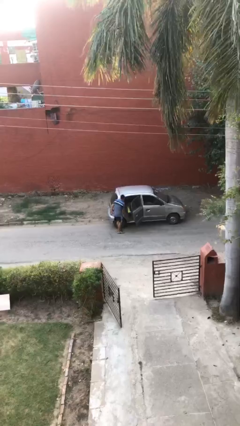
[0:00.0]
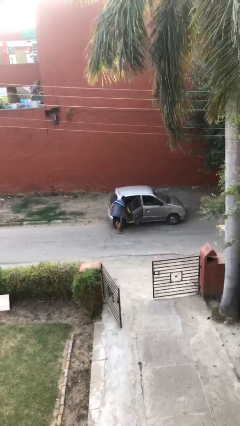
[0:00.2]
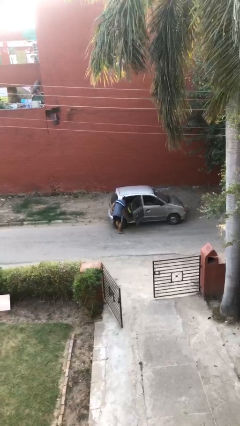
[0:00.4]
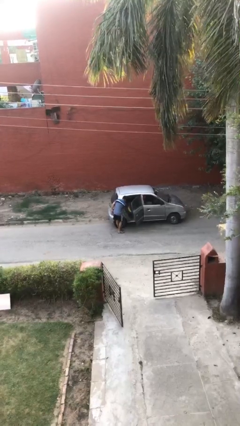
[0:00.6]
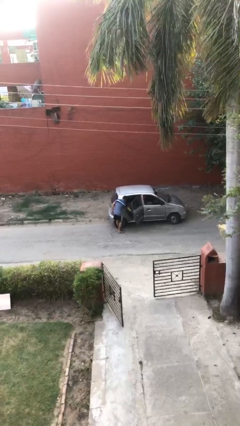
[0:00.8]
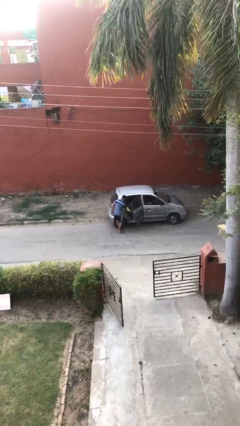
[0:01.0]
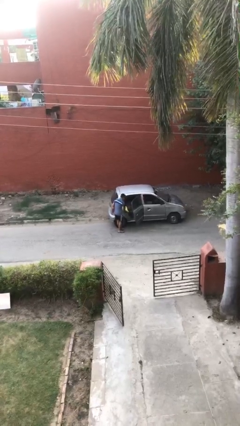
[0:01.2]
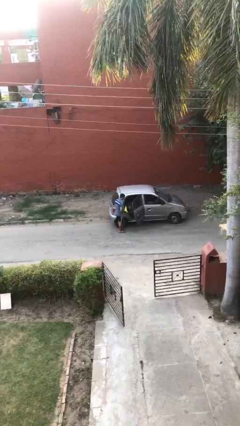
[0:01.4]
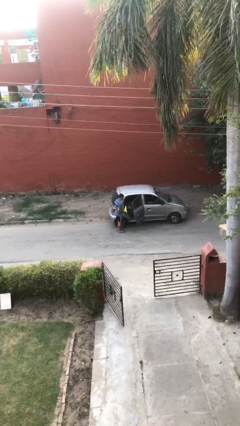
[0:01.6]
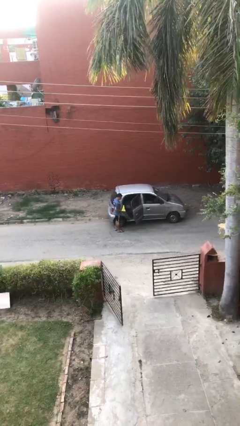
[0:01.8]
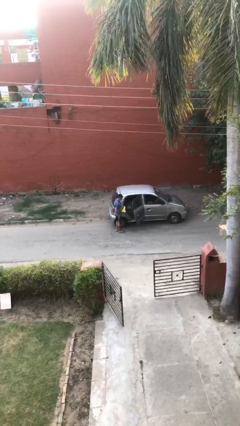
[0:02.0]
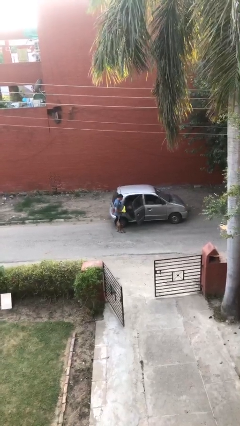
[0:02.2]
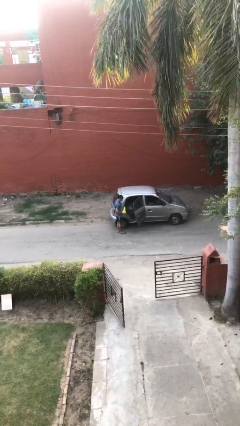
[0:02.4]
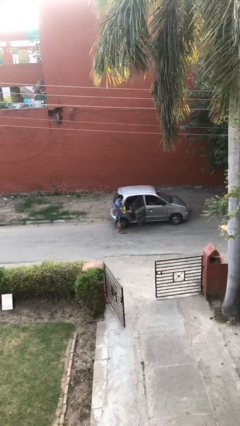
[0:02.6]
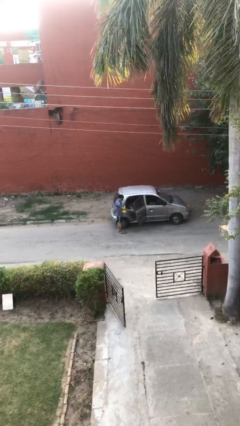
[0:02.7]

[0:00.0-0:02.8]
person unloads car

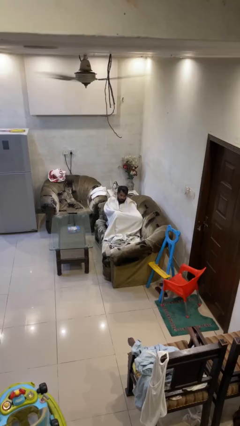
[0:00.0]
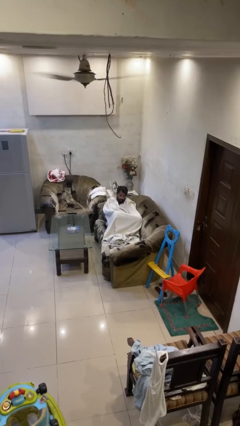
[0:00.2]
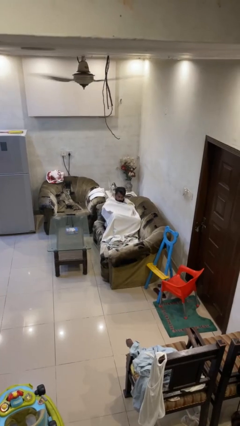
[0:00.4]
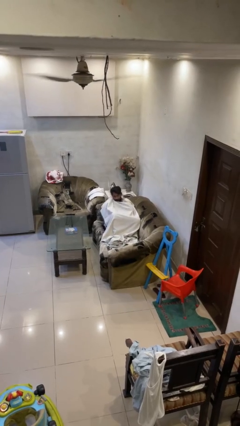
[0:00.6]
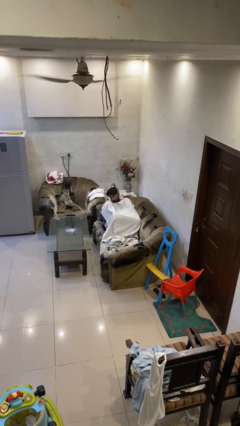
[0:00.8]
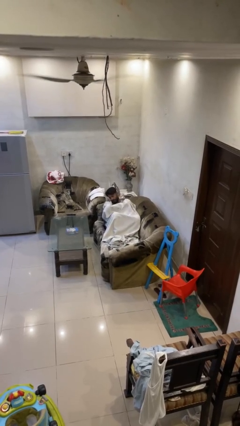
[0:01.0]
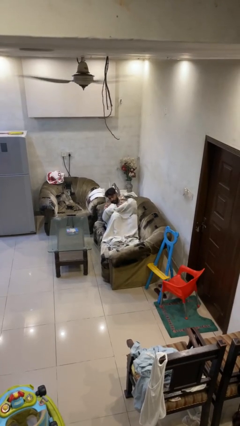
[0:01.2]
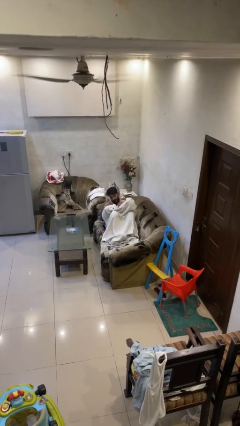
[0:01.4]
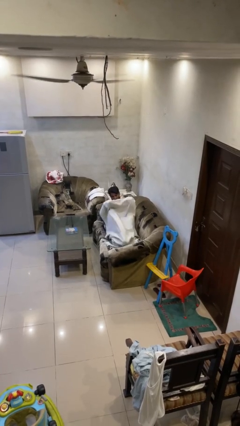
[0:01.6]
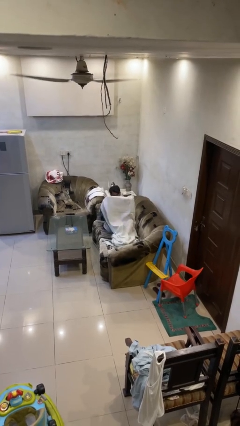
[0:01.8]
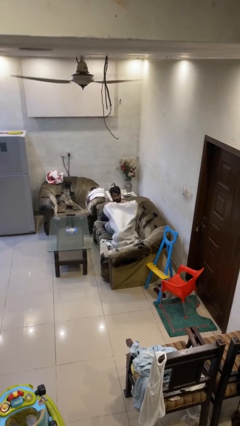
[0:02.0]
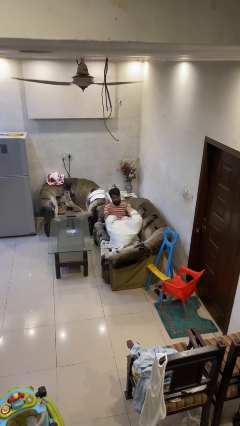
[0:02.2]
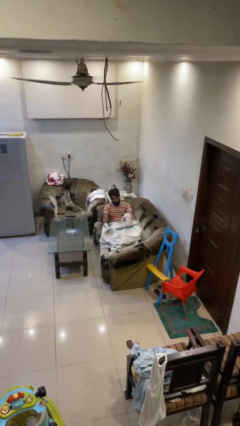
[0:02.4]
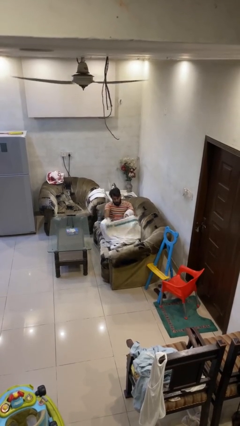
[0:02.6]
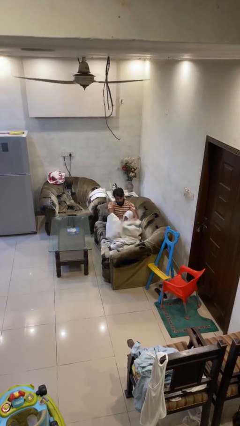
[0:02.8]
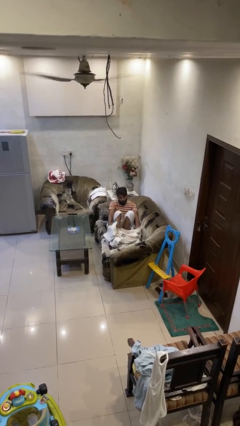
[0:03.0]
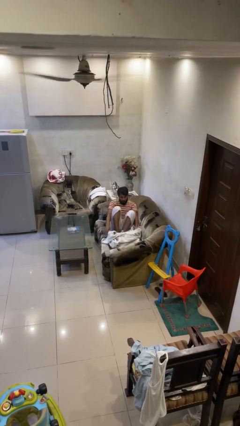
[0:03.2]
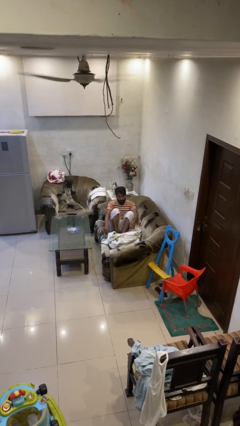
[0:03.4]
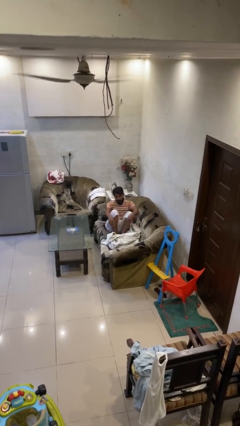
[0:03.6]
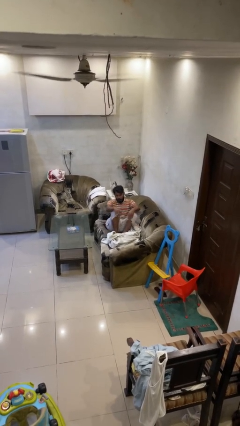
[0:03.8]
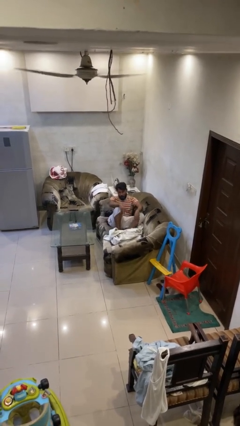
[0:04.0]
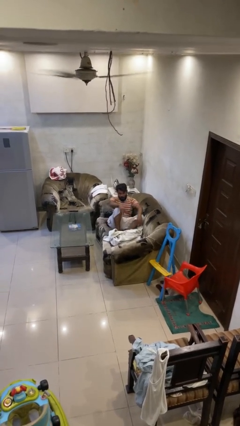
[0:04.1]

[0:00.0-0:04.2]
person uncovers with blanket

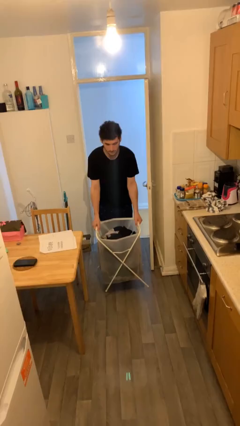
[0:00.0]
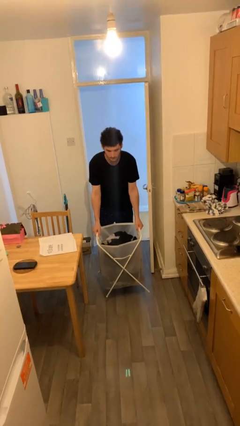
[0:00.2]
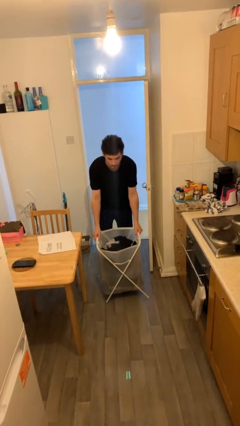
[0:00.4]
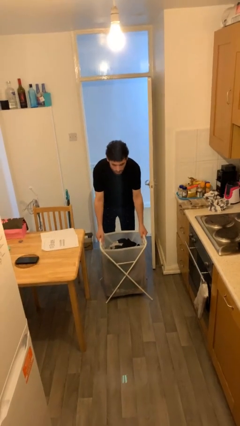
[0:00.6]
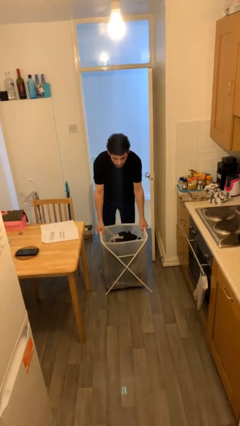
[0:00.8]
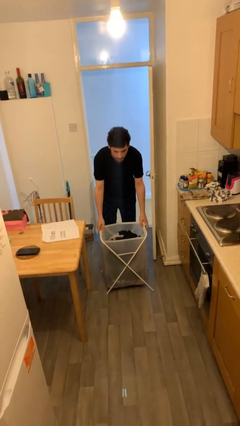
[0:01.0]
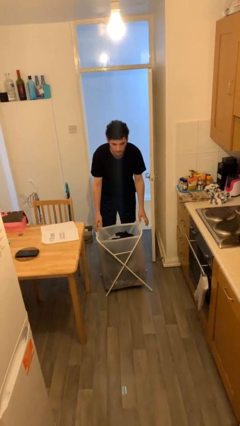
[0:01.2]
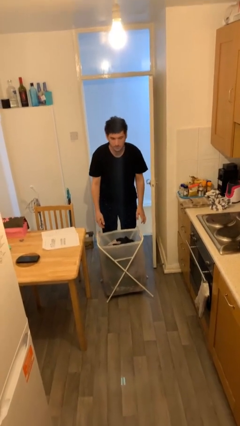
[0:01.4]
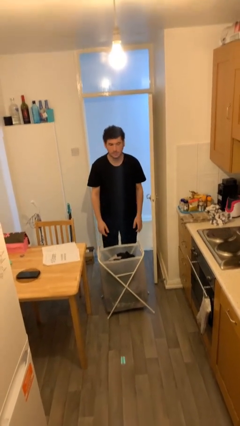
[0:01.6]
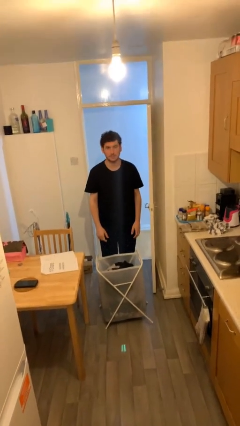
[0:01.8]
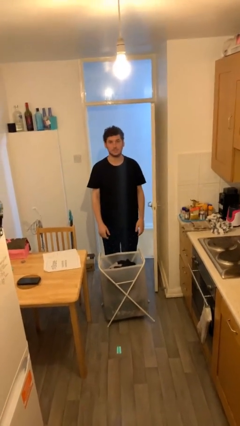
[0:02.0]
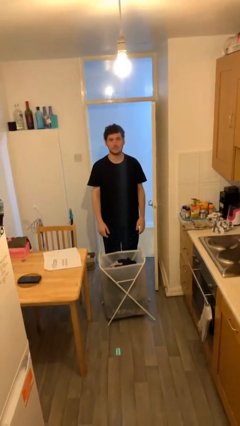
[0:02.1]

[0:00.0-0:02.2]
person puts down object on floor

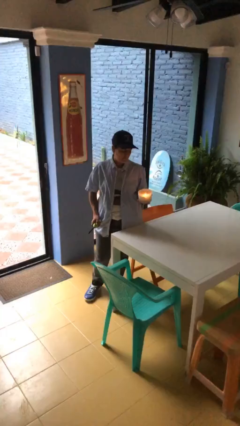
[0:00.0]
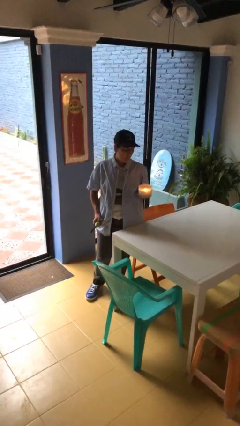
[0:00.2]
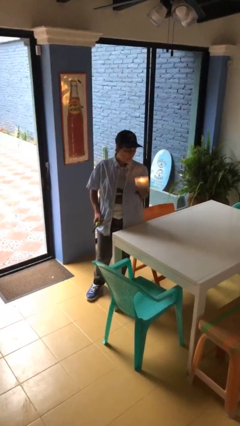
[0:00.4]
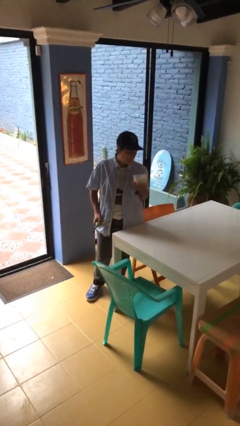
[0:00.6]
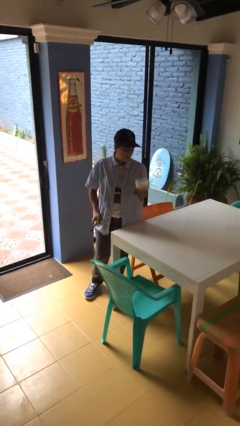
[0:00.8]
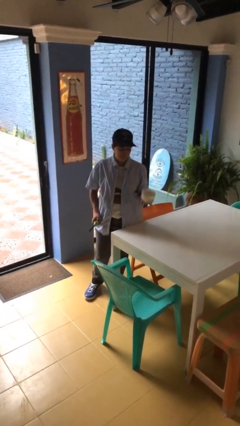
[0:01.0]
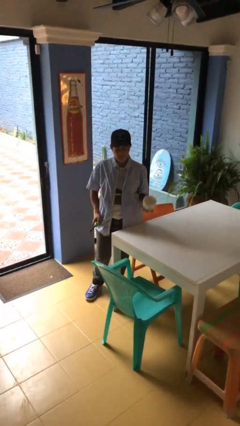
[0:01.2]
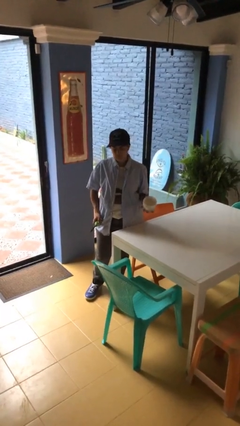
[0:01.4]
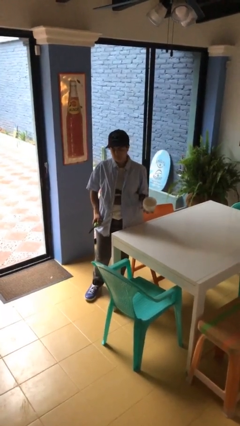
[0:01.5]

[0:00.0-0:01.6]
person extinguishes candle

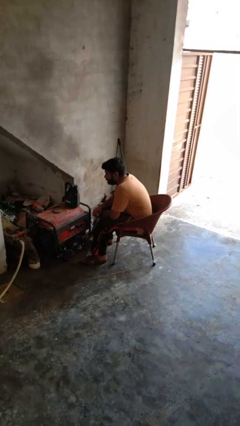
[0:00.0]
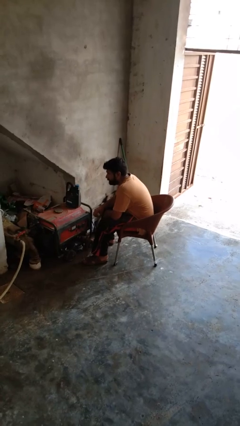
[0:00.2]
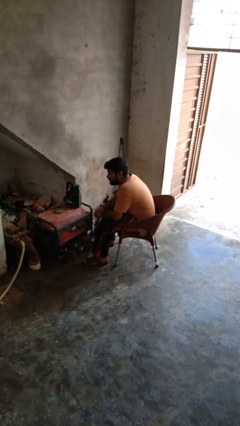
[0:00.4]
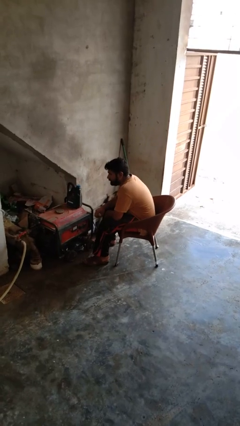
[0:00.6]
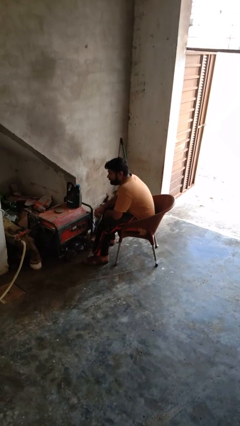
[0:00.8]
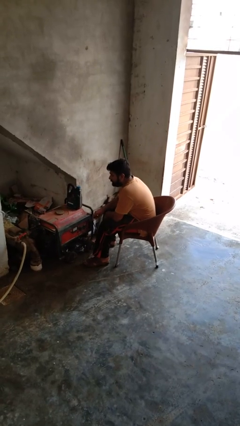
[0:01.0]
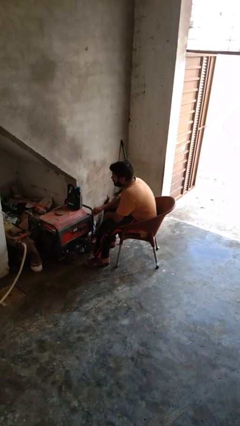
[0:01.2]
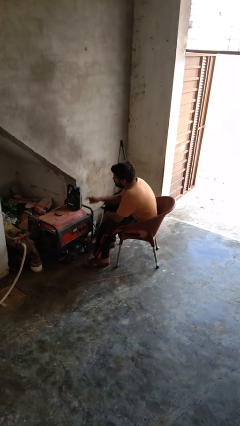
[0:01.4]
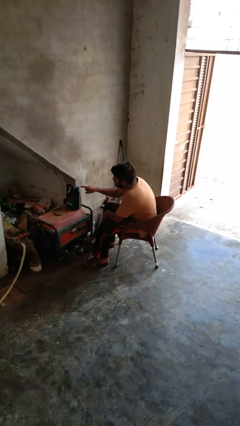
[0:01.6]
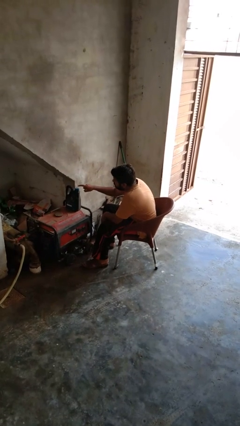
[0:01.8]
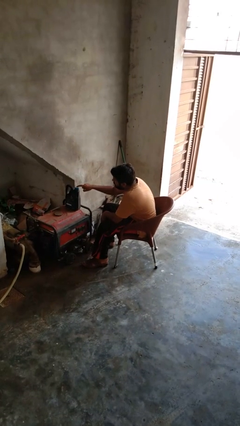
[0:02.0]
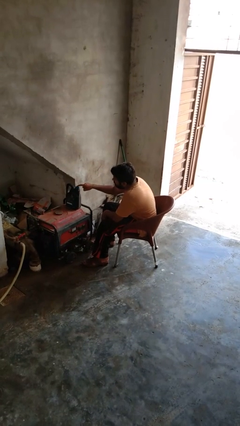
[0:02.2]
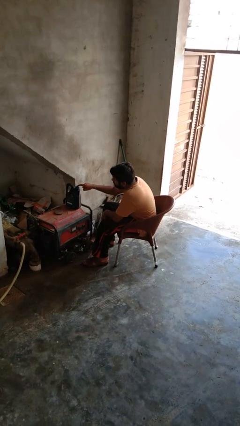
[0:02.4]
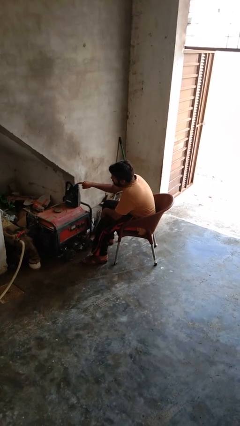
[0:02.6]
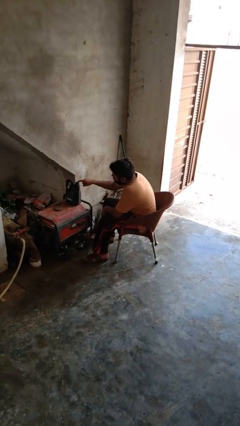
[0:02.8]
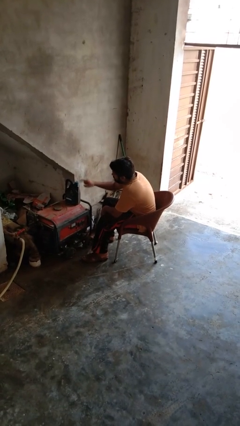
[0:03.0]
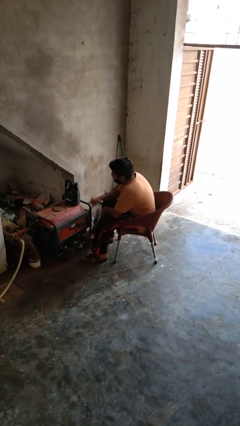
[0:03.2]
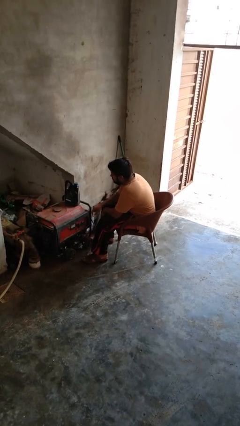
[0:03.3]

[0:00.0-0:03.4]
person taps object with finger

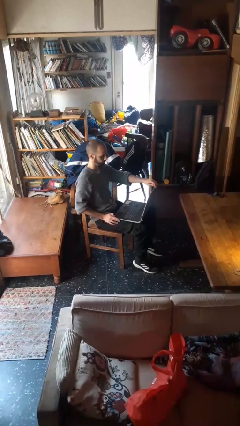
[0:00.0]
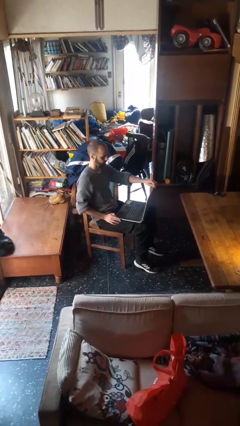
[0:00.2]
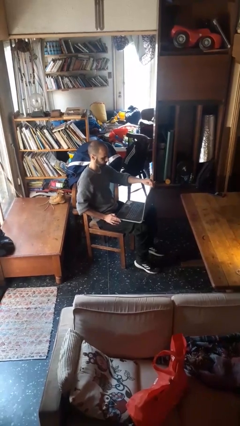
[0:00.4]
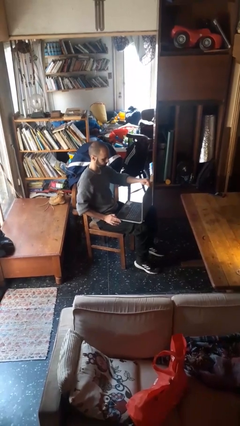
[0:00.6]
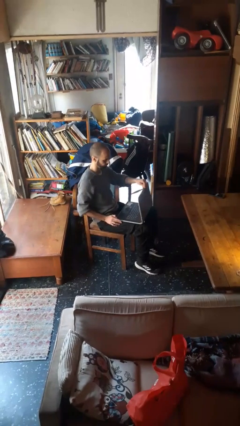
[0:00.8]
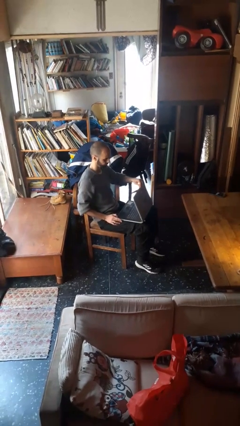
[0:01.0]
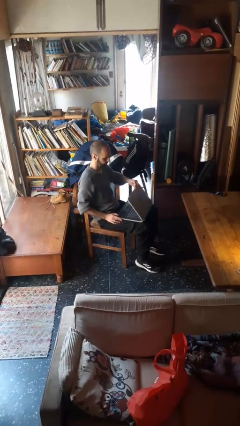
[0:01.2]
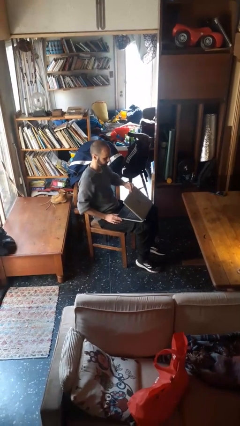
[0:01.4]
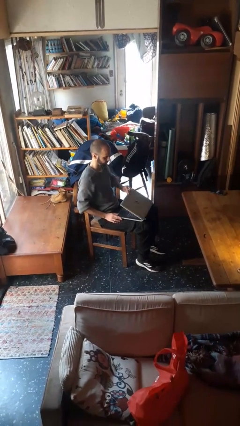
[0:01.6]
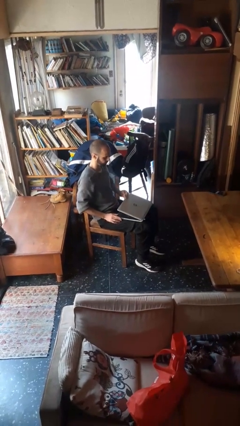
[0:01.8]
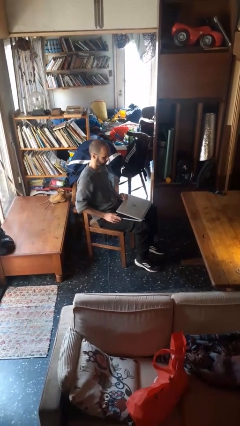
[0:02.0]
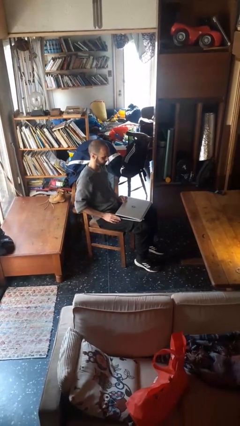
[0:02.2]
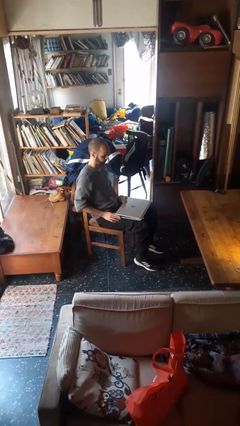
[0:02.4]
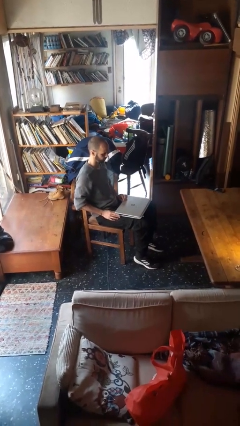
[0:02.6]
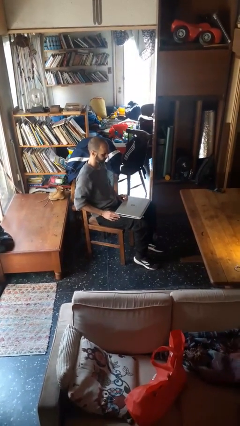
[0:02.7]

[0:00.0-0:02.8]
person closes laptop

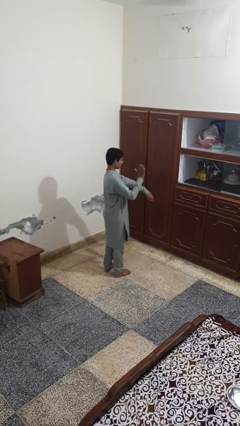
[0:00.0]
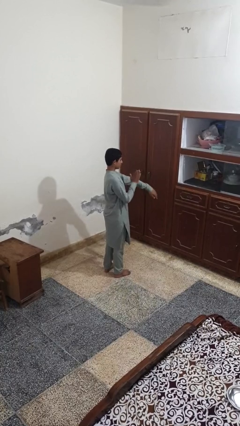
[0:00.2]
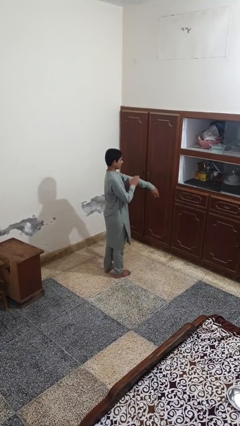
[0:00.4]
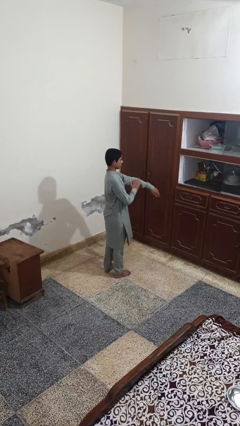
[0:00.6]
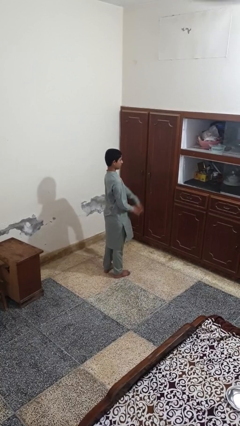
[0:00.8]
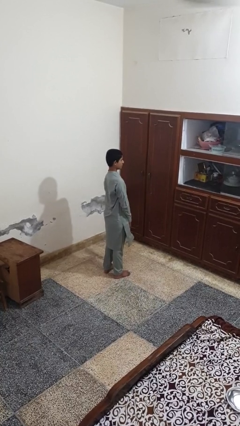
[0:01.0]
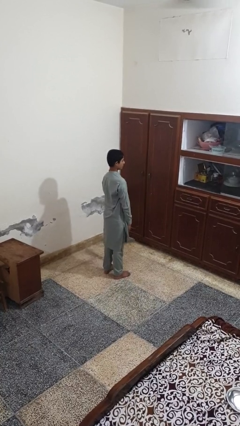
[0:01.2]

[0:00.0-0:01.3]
person swats bug
